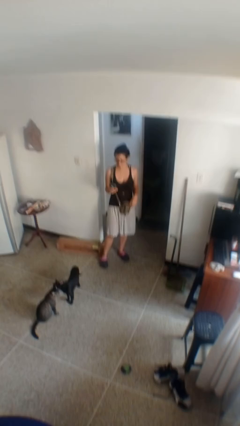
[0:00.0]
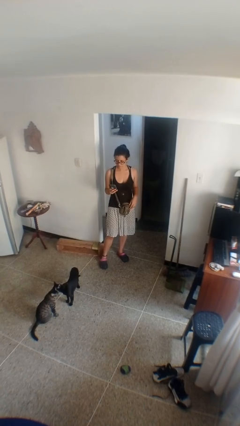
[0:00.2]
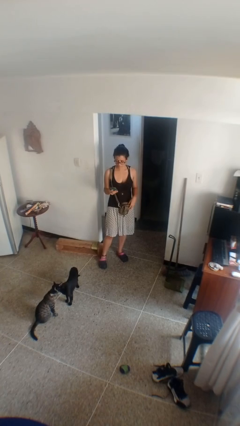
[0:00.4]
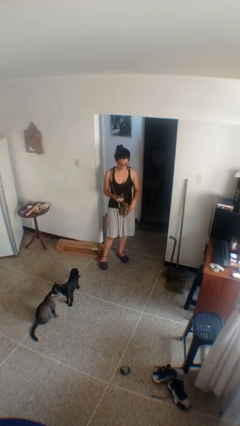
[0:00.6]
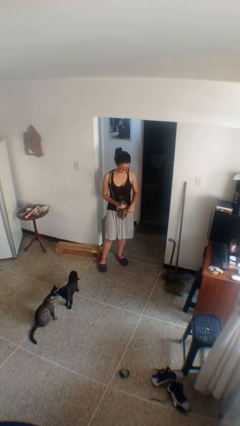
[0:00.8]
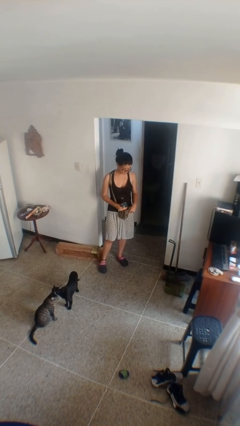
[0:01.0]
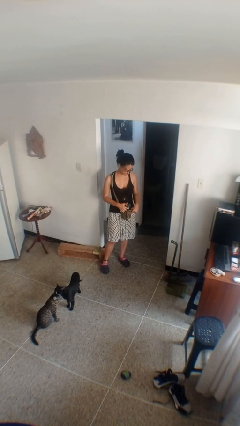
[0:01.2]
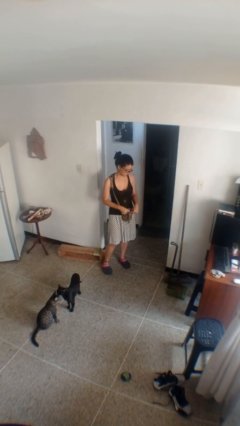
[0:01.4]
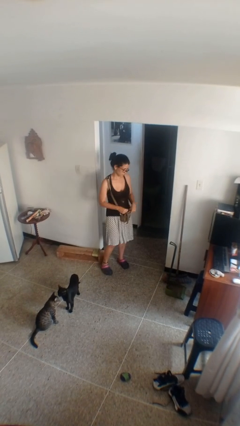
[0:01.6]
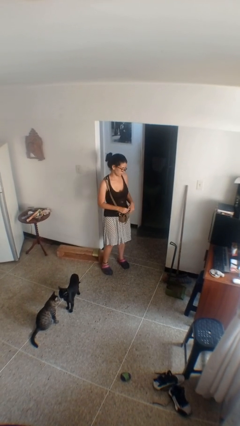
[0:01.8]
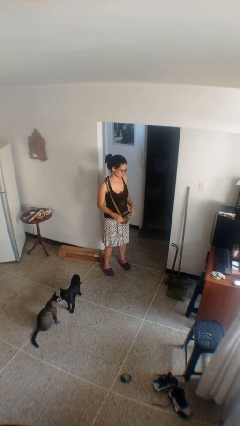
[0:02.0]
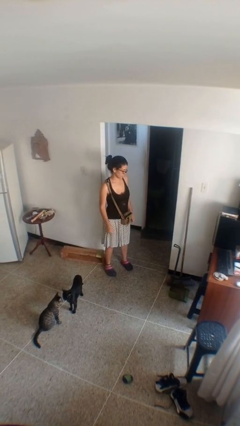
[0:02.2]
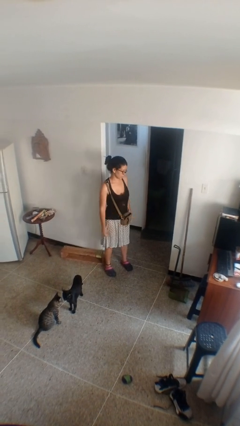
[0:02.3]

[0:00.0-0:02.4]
person puts phone into pocket

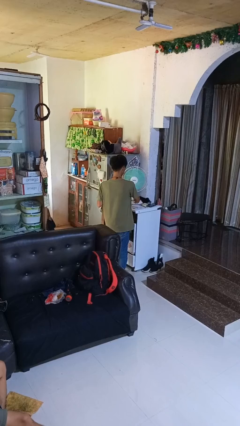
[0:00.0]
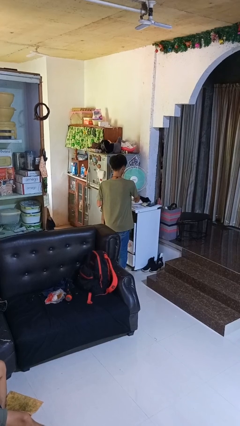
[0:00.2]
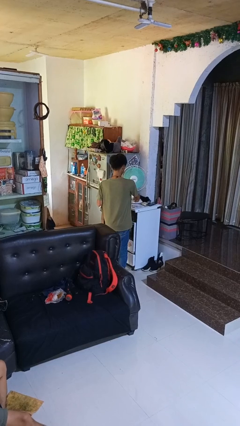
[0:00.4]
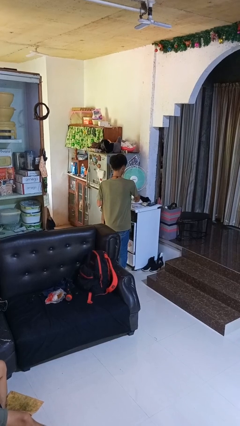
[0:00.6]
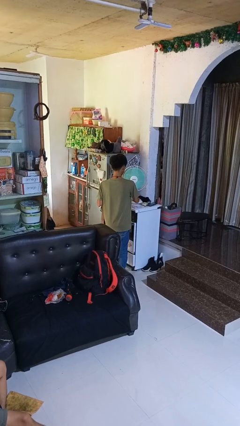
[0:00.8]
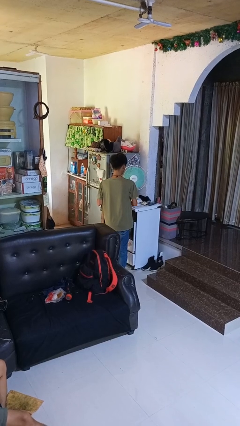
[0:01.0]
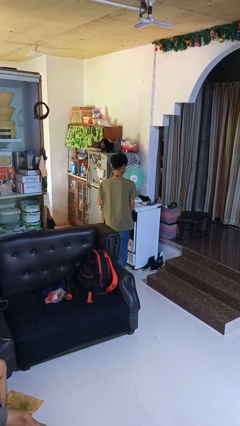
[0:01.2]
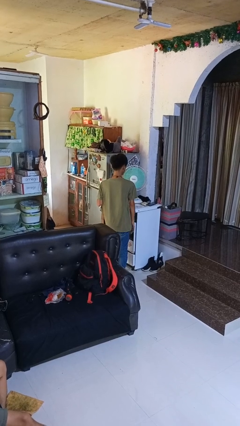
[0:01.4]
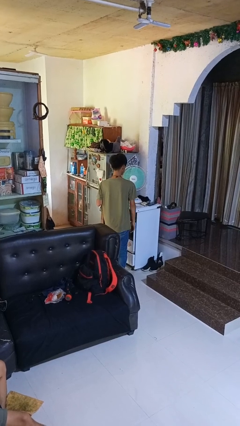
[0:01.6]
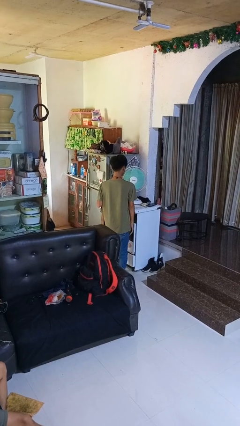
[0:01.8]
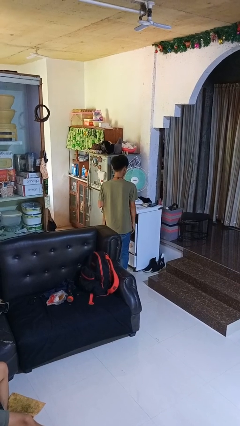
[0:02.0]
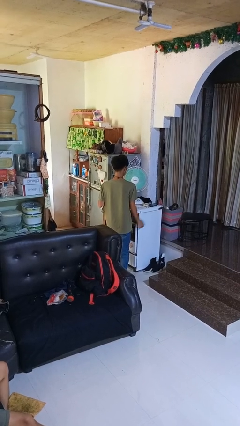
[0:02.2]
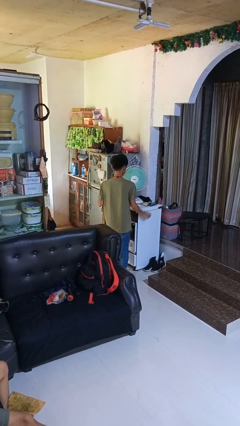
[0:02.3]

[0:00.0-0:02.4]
person turns on fan

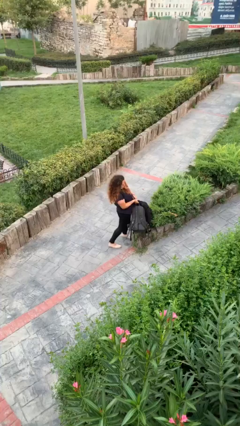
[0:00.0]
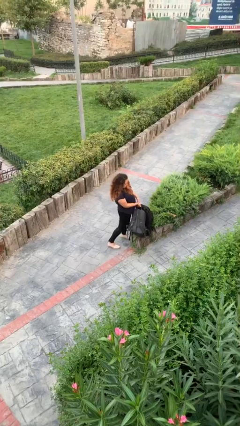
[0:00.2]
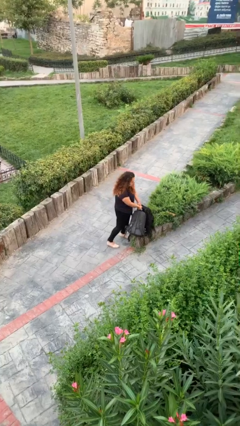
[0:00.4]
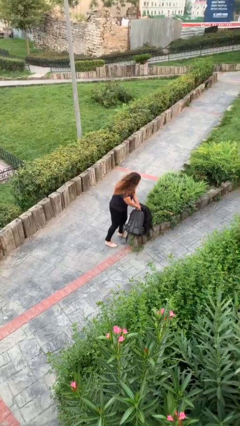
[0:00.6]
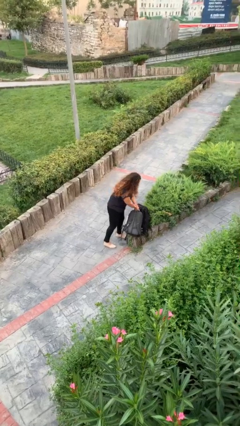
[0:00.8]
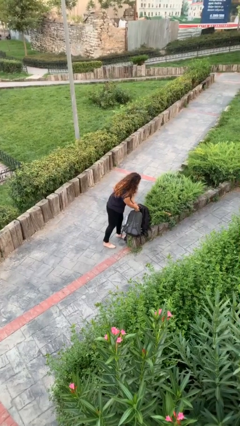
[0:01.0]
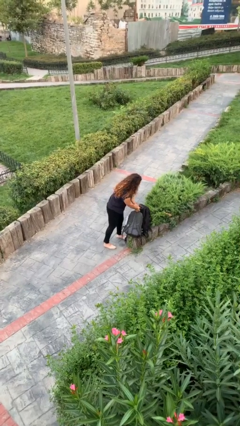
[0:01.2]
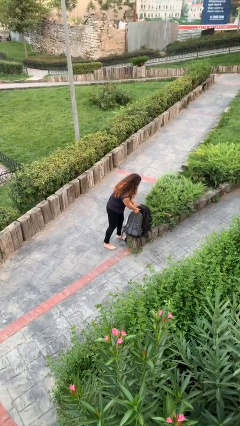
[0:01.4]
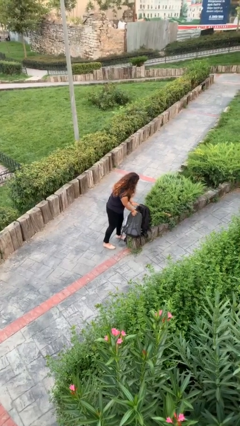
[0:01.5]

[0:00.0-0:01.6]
person puts down object on floor

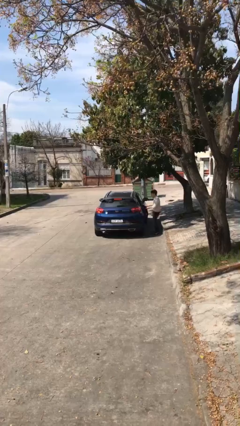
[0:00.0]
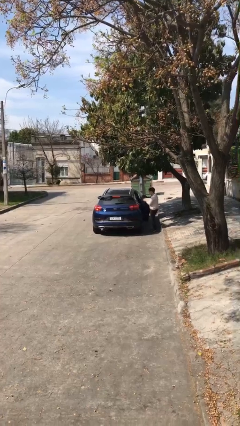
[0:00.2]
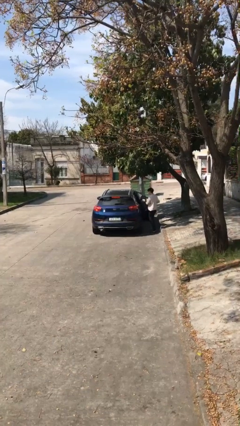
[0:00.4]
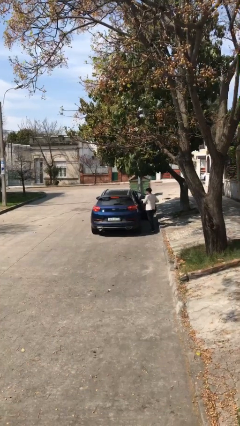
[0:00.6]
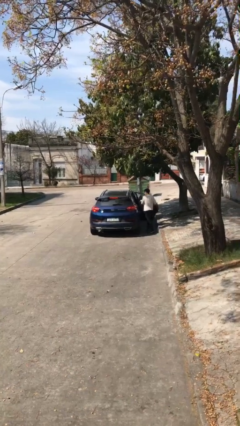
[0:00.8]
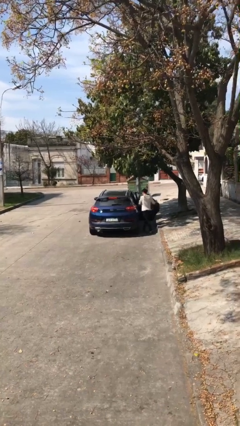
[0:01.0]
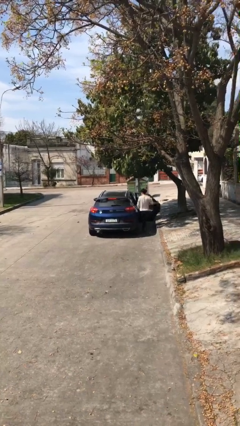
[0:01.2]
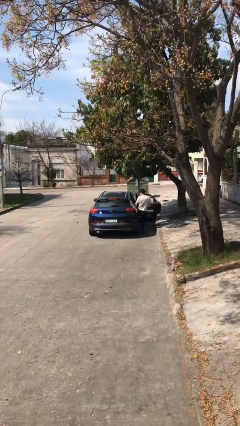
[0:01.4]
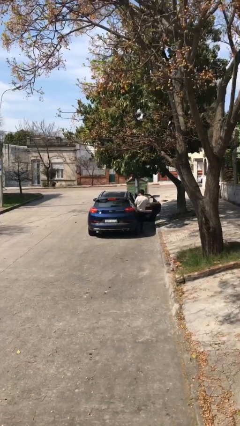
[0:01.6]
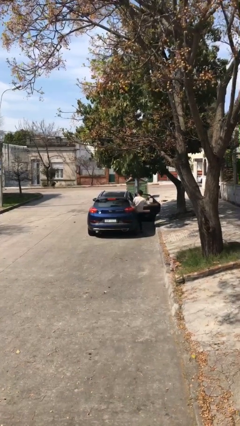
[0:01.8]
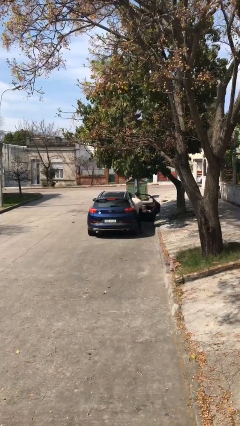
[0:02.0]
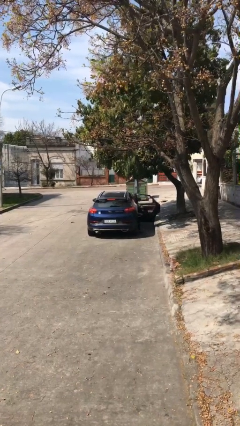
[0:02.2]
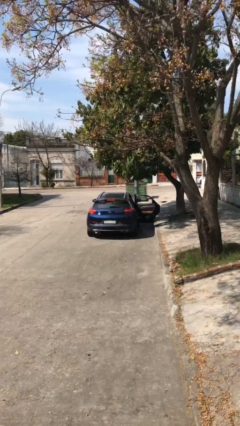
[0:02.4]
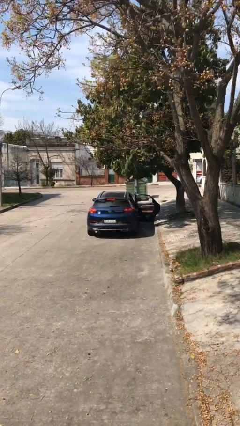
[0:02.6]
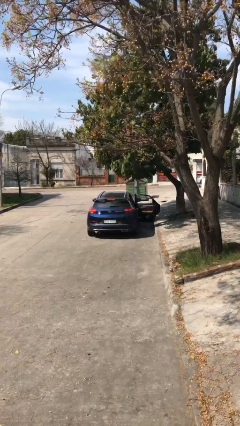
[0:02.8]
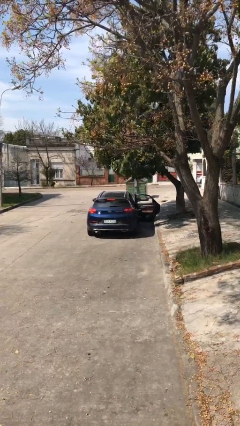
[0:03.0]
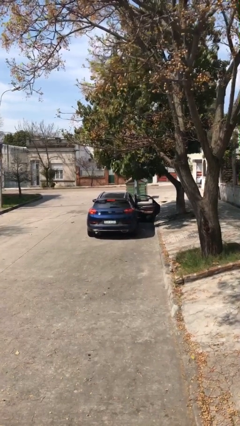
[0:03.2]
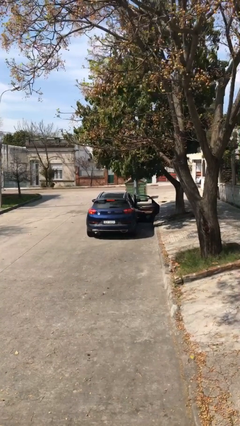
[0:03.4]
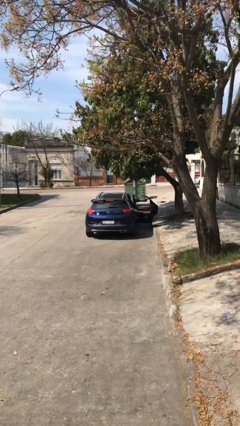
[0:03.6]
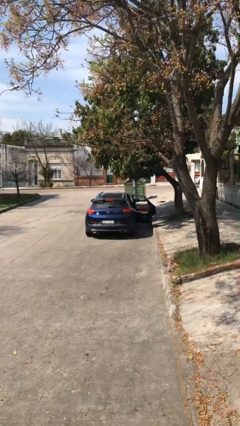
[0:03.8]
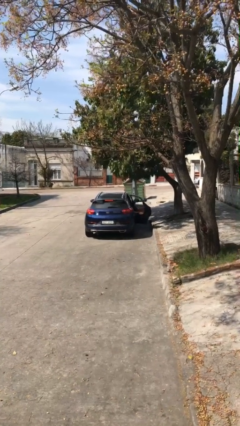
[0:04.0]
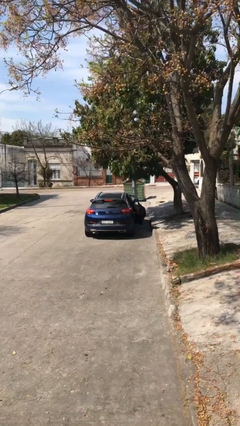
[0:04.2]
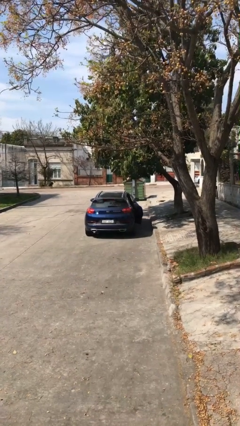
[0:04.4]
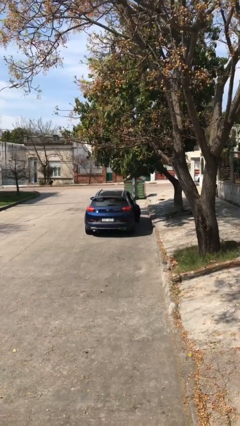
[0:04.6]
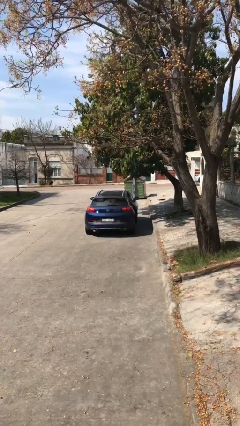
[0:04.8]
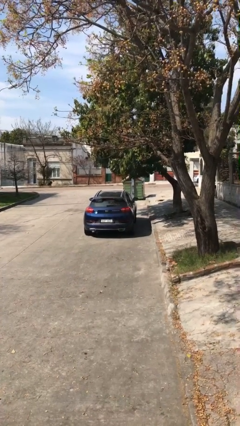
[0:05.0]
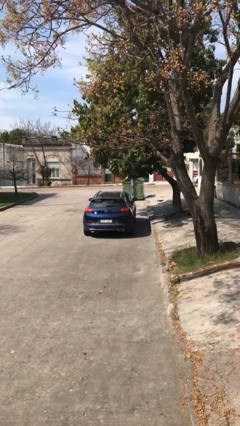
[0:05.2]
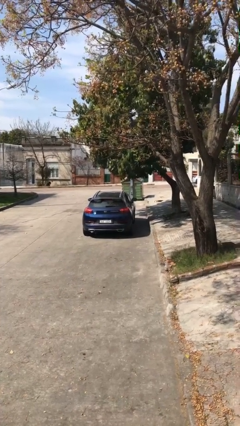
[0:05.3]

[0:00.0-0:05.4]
car picks up person

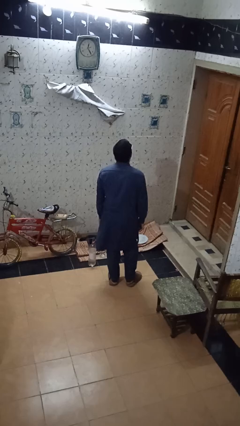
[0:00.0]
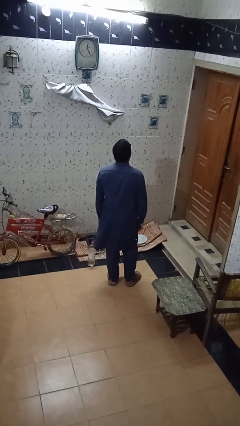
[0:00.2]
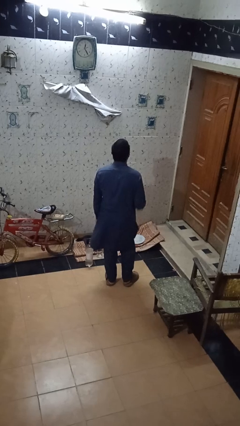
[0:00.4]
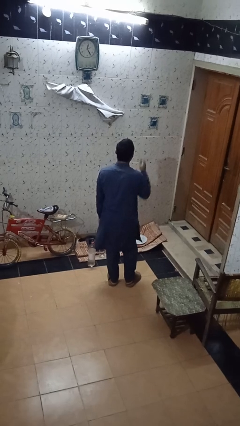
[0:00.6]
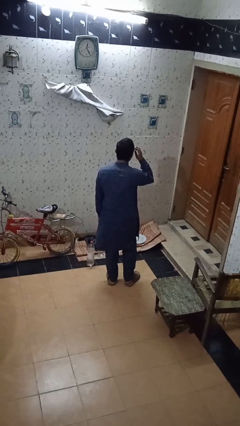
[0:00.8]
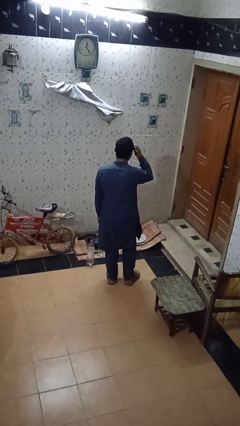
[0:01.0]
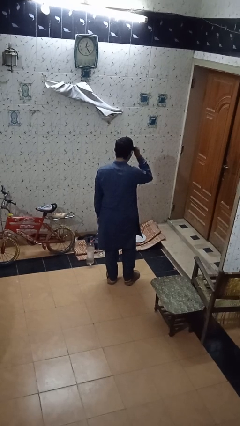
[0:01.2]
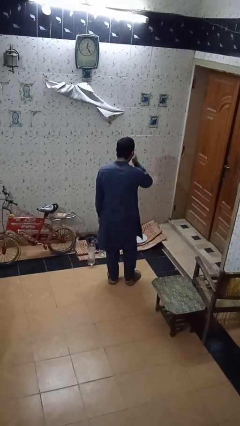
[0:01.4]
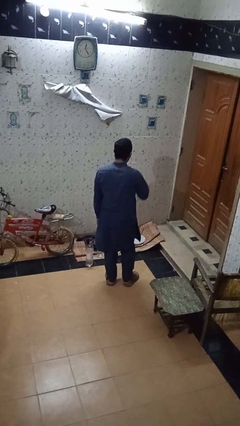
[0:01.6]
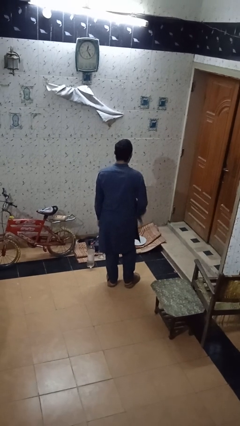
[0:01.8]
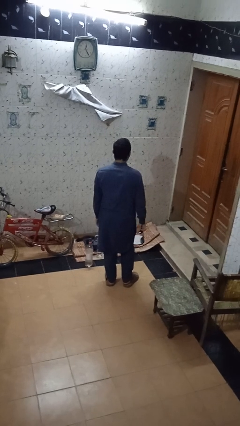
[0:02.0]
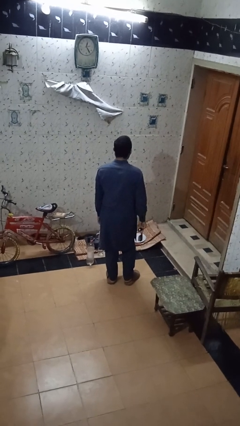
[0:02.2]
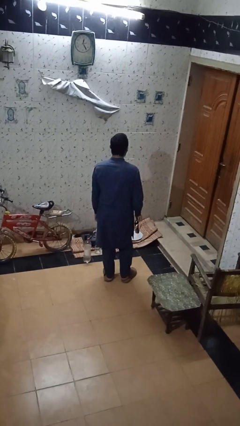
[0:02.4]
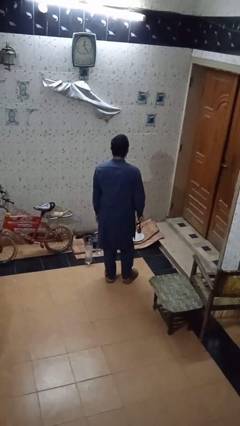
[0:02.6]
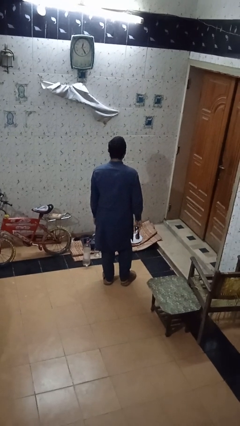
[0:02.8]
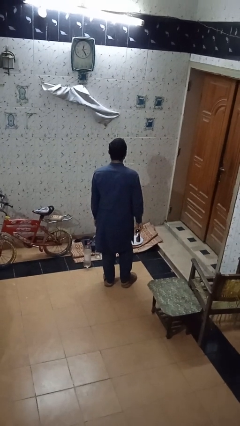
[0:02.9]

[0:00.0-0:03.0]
person takes off sunglasses

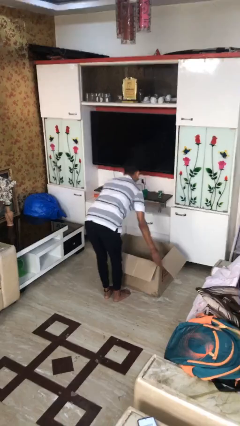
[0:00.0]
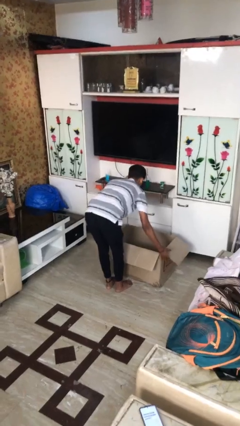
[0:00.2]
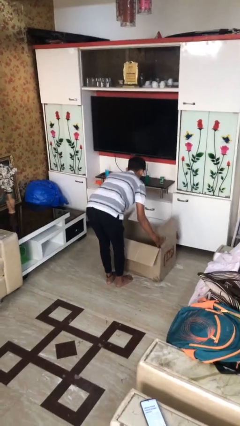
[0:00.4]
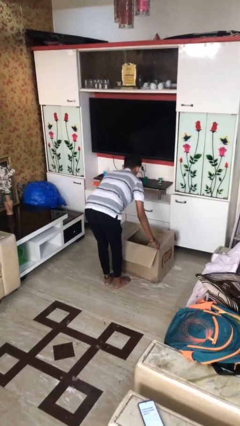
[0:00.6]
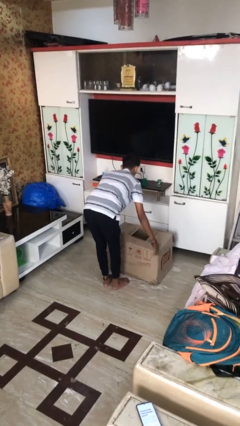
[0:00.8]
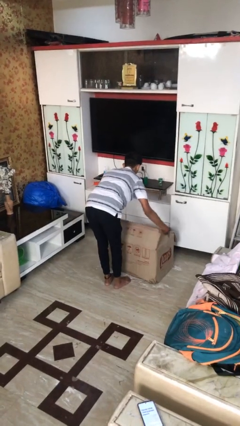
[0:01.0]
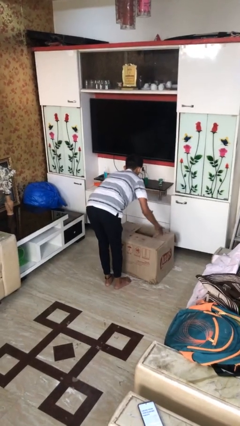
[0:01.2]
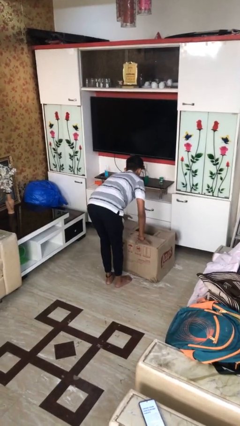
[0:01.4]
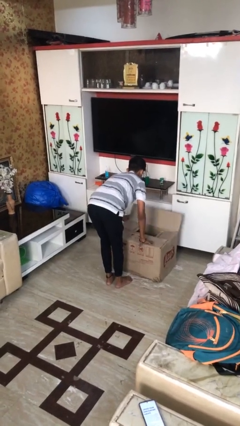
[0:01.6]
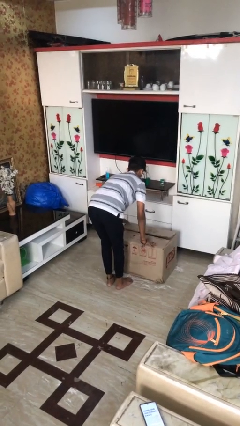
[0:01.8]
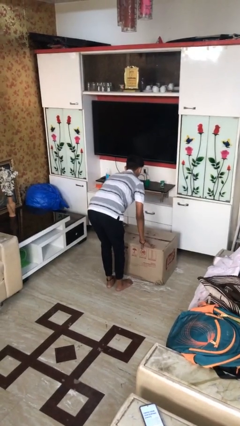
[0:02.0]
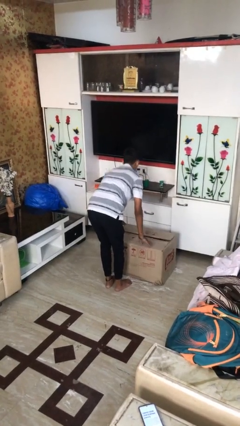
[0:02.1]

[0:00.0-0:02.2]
person closes box

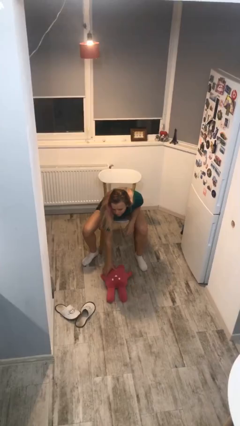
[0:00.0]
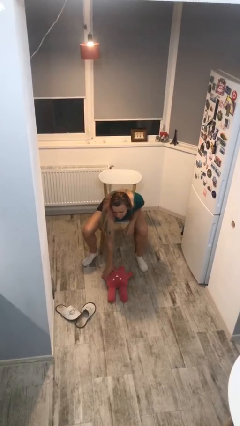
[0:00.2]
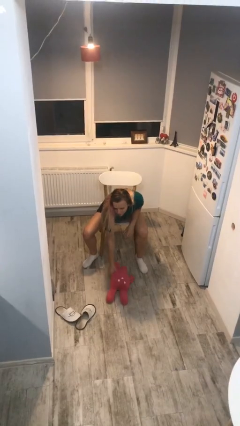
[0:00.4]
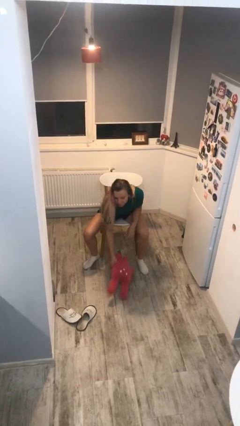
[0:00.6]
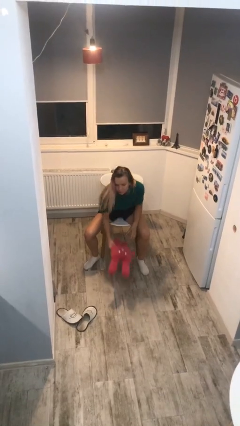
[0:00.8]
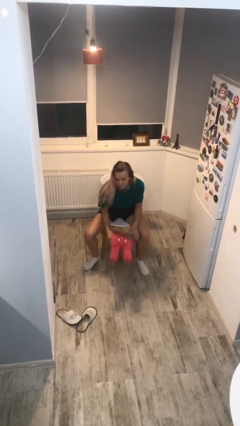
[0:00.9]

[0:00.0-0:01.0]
person picks up object from floor
